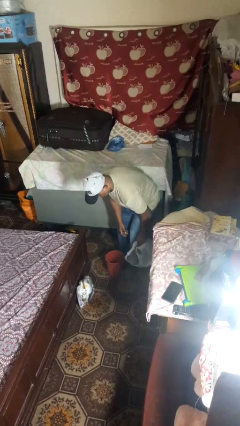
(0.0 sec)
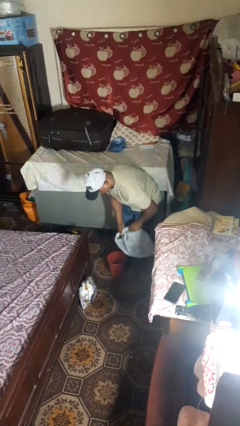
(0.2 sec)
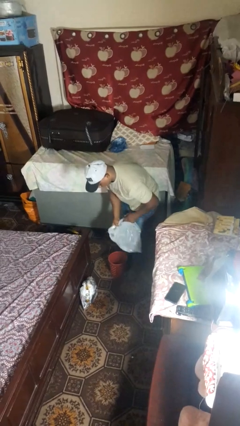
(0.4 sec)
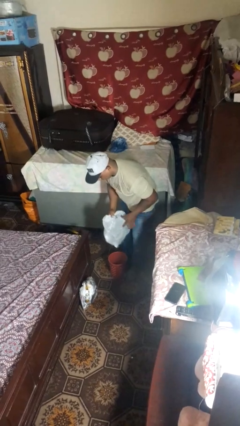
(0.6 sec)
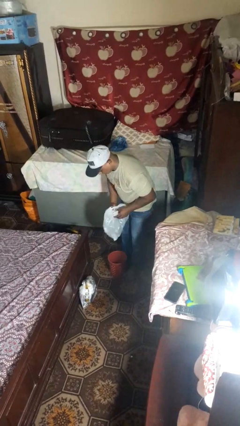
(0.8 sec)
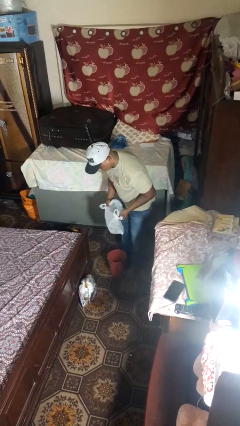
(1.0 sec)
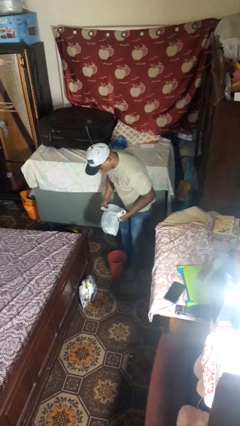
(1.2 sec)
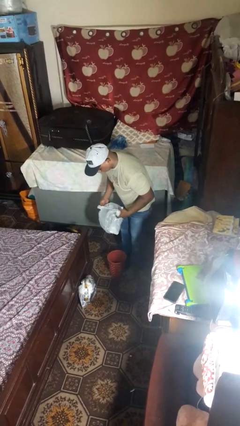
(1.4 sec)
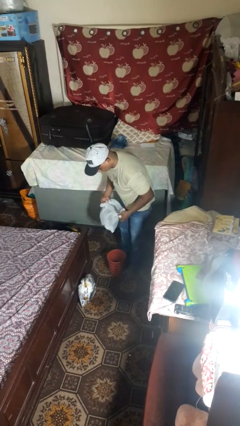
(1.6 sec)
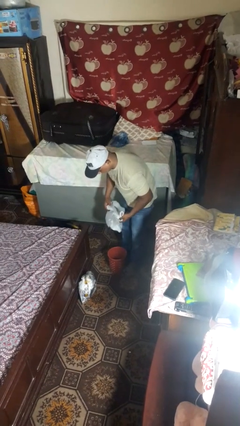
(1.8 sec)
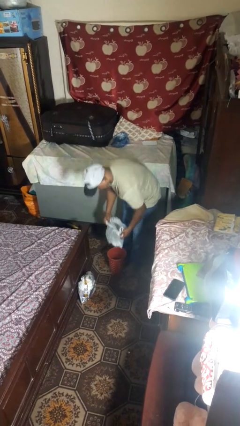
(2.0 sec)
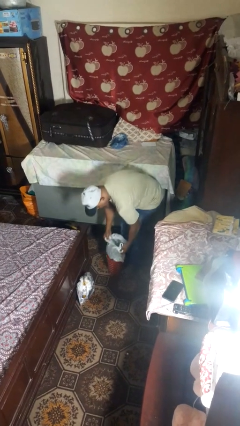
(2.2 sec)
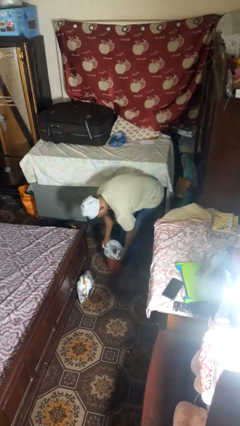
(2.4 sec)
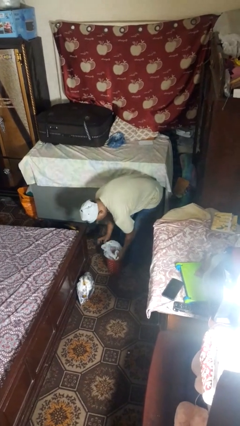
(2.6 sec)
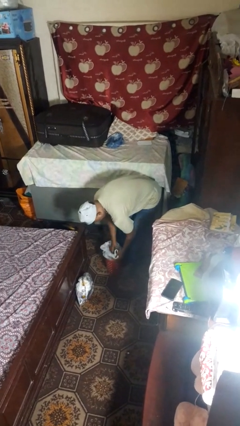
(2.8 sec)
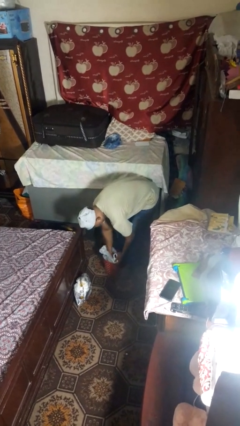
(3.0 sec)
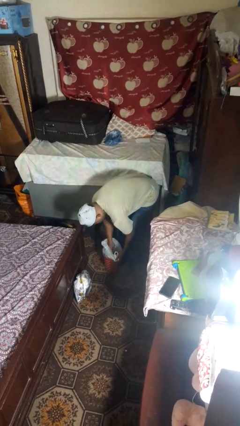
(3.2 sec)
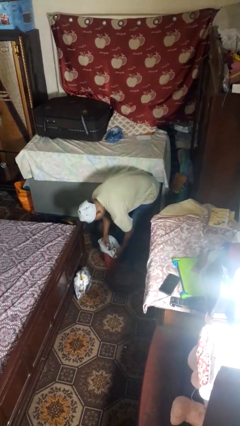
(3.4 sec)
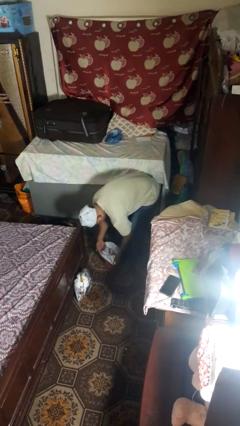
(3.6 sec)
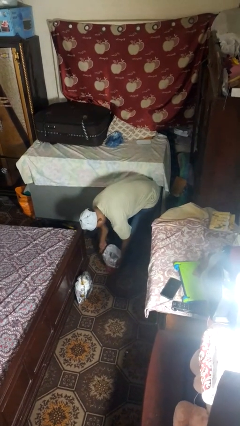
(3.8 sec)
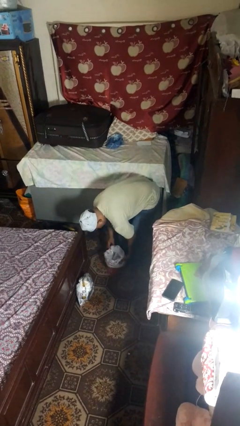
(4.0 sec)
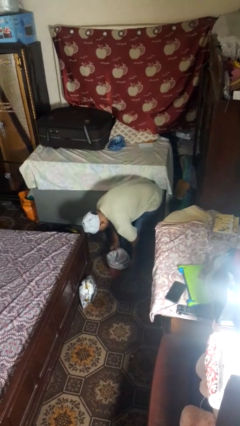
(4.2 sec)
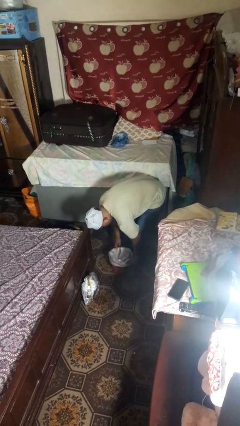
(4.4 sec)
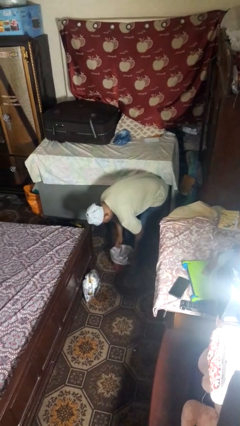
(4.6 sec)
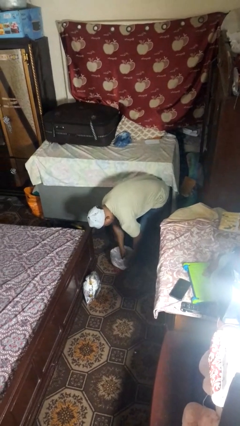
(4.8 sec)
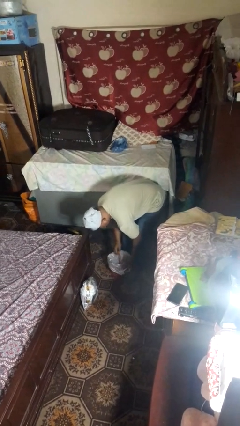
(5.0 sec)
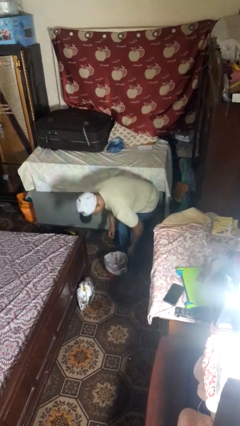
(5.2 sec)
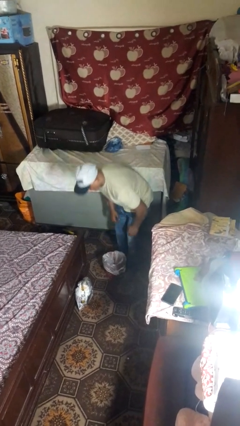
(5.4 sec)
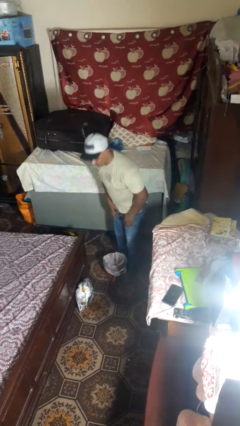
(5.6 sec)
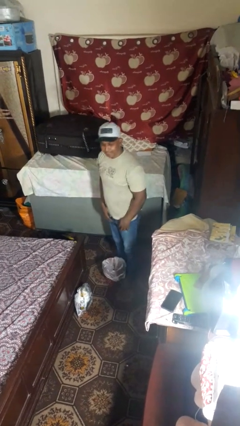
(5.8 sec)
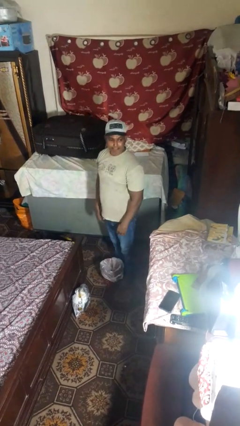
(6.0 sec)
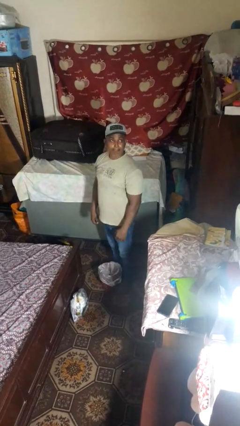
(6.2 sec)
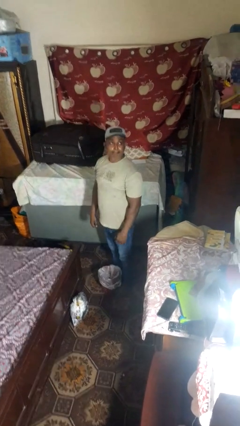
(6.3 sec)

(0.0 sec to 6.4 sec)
person inserts trashbag into trashcan

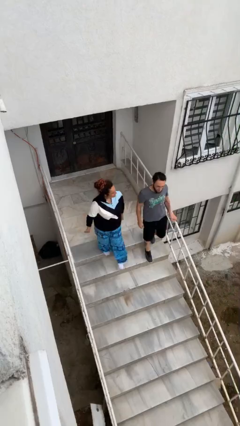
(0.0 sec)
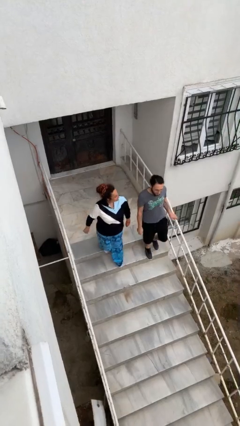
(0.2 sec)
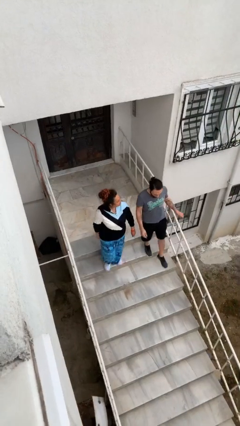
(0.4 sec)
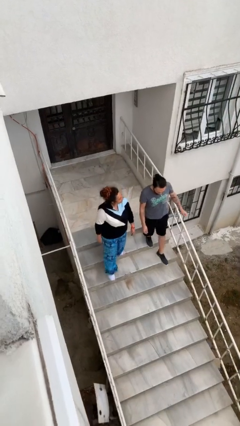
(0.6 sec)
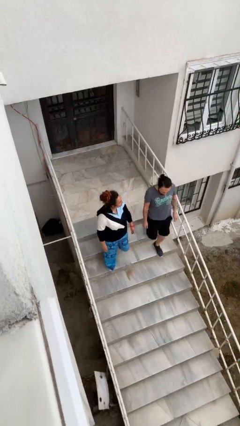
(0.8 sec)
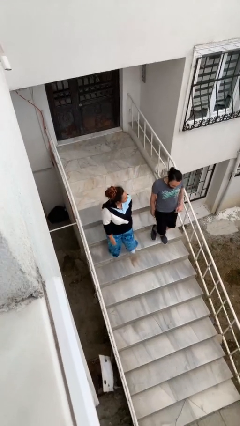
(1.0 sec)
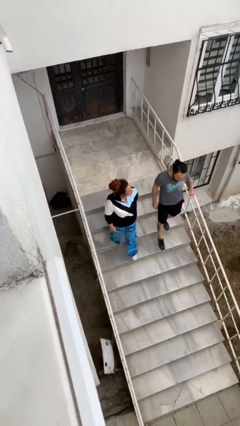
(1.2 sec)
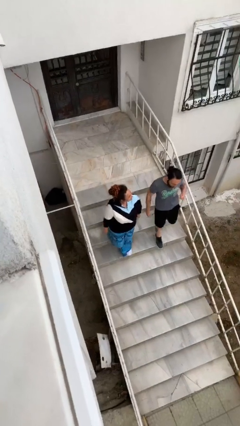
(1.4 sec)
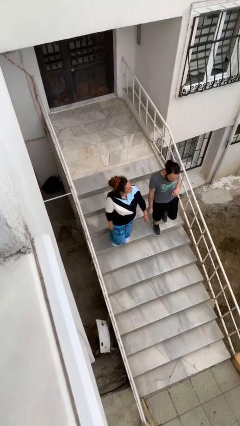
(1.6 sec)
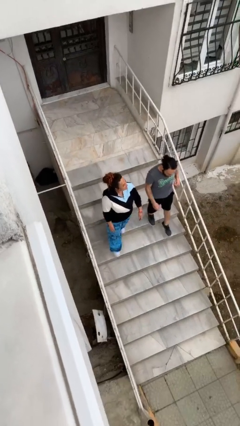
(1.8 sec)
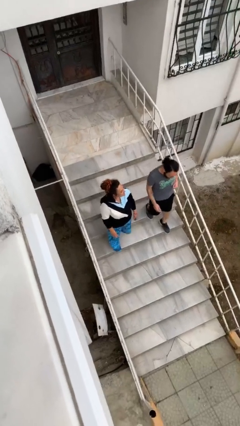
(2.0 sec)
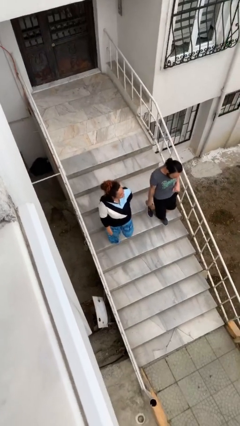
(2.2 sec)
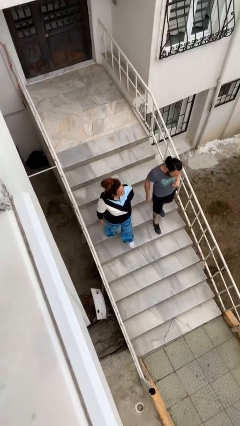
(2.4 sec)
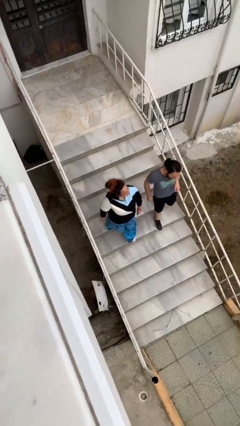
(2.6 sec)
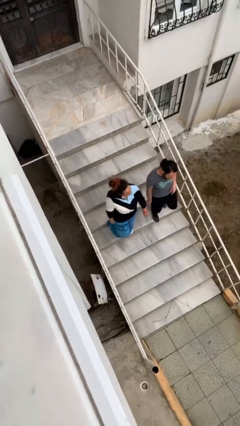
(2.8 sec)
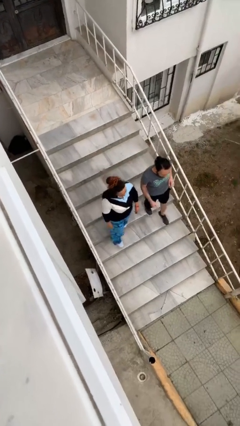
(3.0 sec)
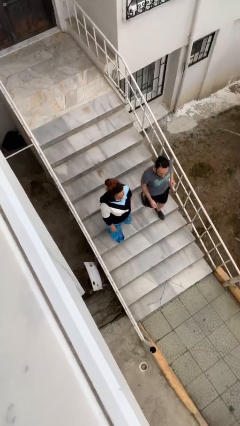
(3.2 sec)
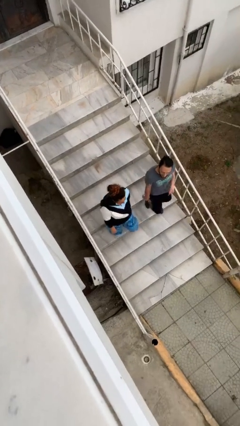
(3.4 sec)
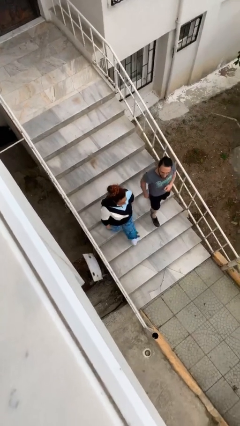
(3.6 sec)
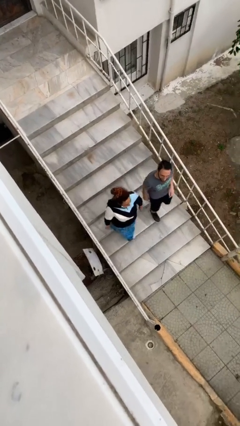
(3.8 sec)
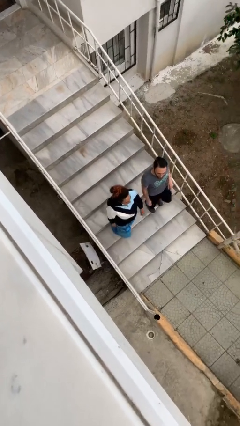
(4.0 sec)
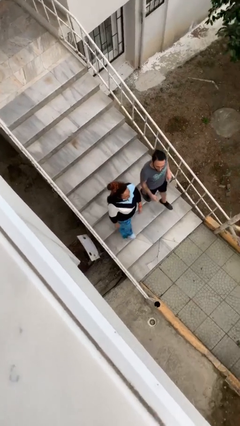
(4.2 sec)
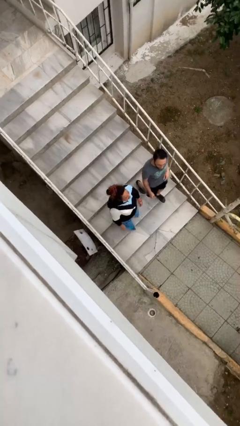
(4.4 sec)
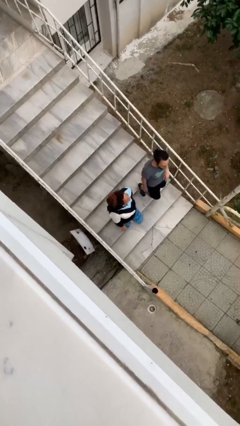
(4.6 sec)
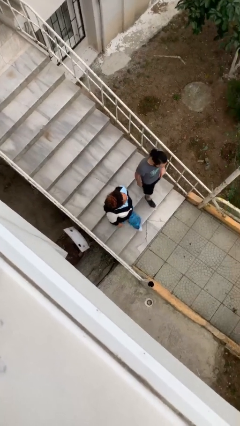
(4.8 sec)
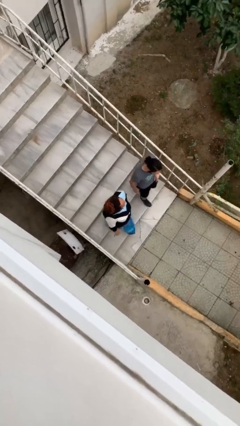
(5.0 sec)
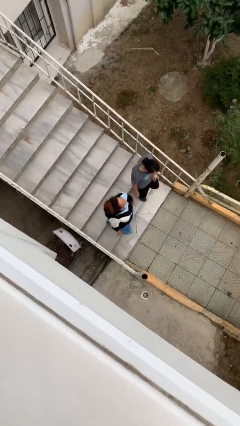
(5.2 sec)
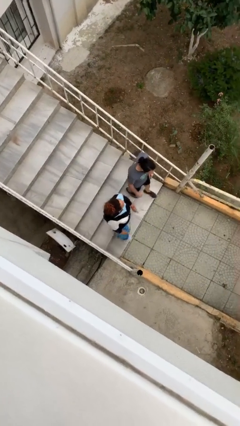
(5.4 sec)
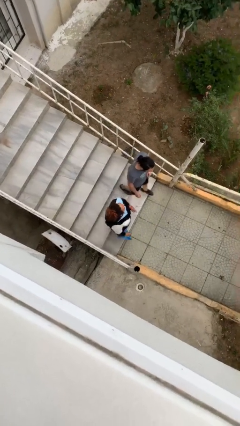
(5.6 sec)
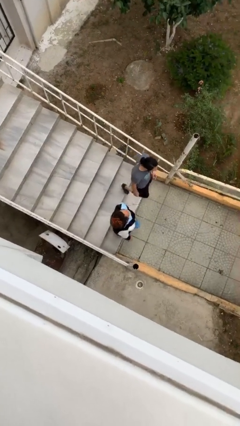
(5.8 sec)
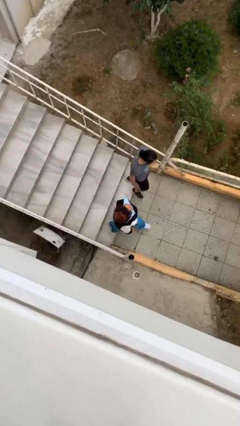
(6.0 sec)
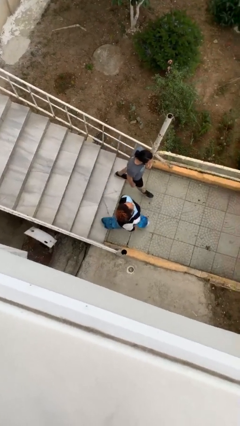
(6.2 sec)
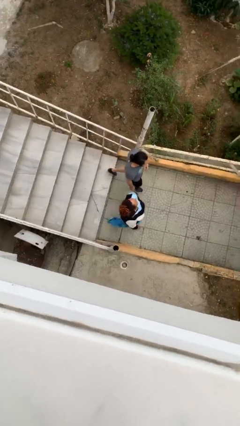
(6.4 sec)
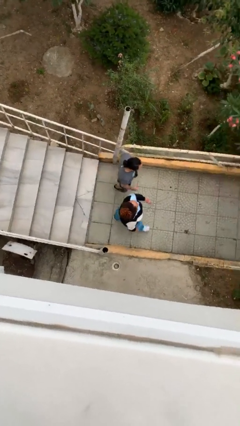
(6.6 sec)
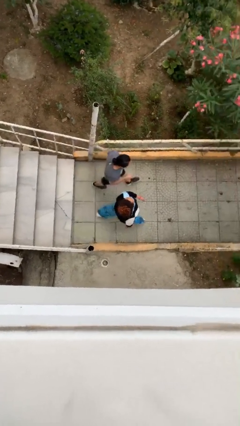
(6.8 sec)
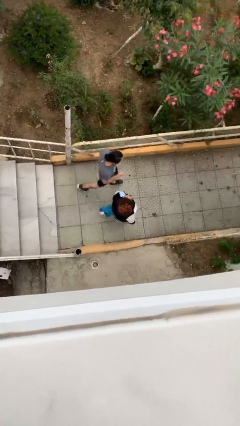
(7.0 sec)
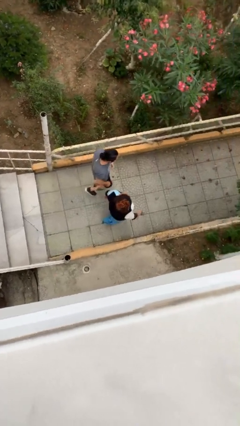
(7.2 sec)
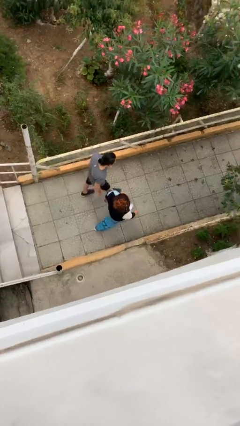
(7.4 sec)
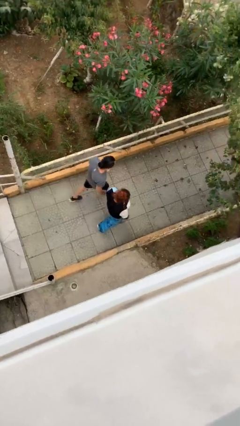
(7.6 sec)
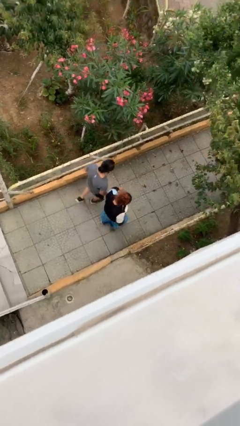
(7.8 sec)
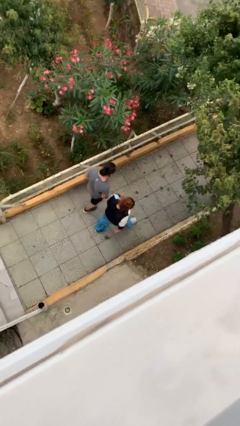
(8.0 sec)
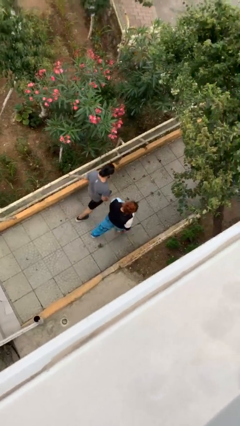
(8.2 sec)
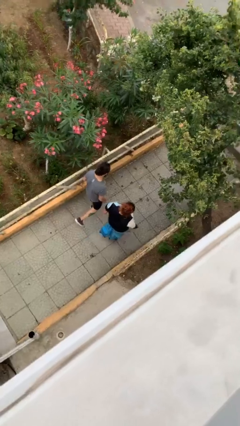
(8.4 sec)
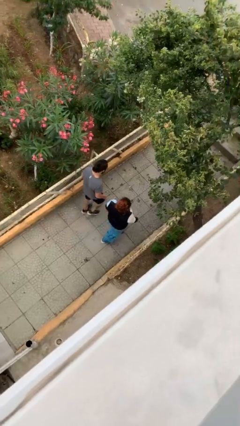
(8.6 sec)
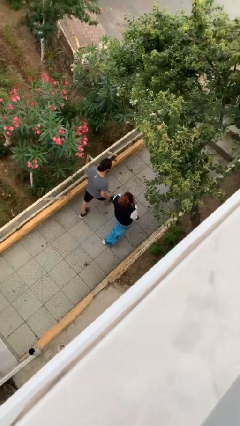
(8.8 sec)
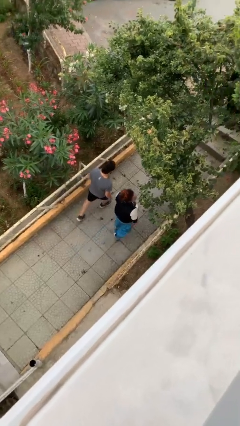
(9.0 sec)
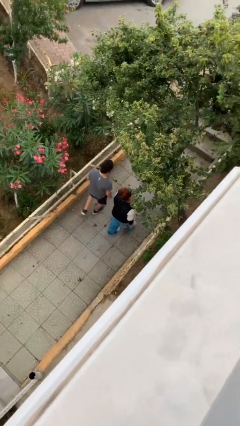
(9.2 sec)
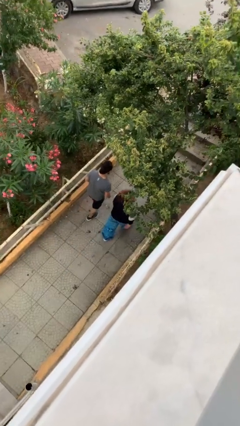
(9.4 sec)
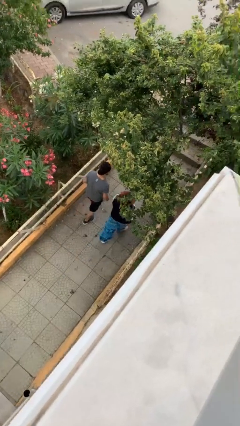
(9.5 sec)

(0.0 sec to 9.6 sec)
person talks to person

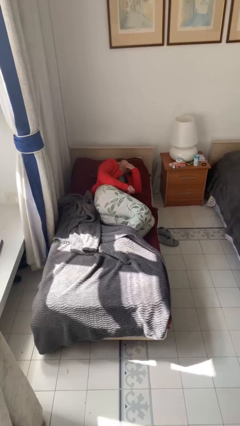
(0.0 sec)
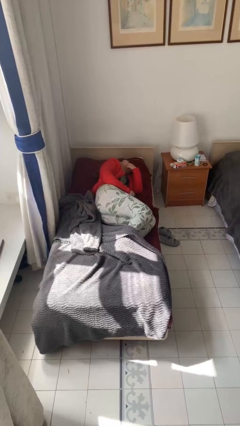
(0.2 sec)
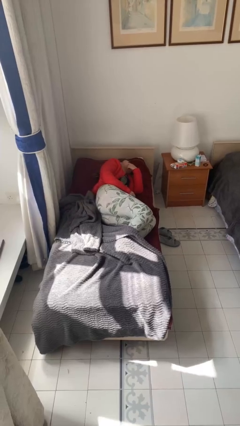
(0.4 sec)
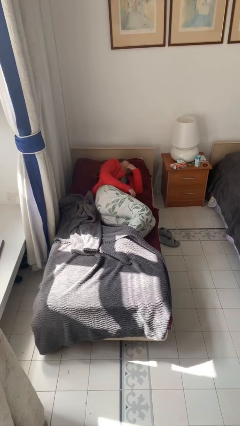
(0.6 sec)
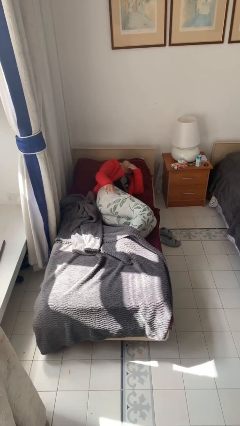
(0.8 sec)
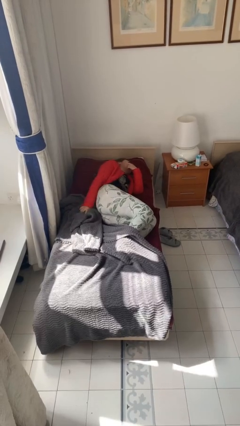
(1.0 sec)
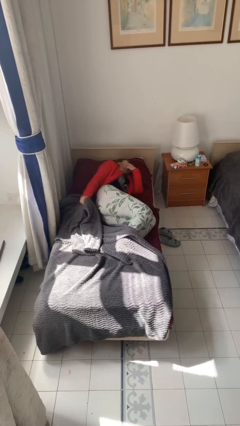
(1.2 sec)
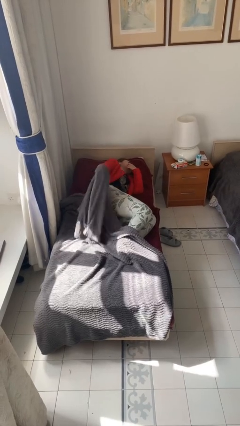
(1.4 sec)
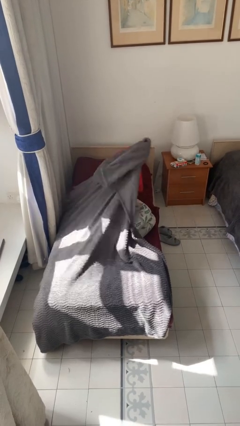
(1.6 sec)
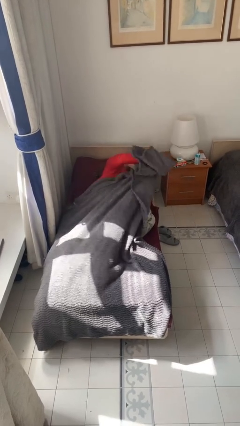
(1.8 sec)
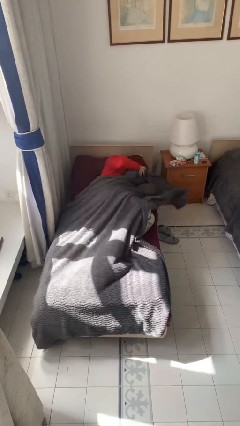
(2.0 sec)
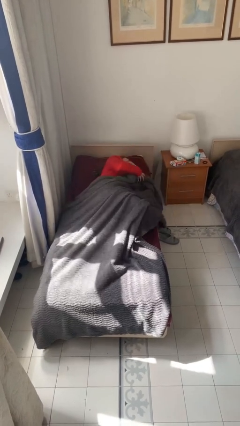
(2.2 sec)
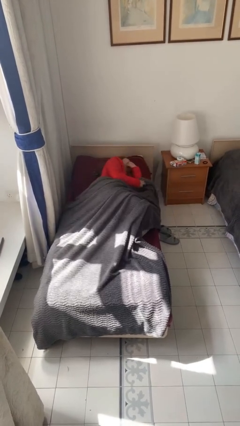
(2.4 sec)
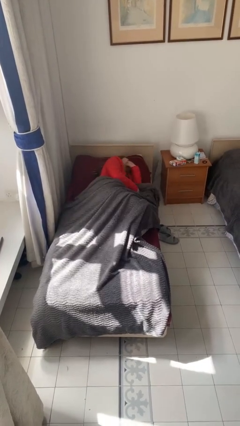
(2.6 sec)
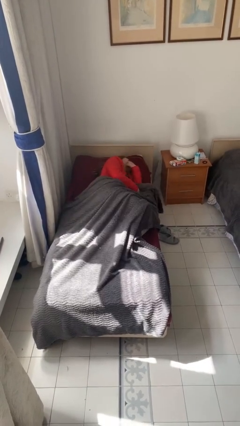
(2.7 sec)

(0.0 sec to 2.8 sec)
person covers with bedsheets
